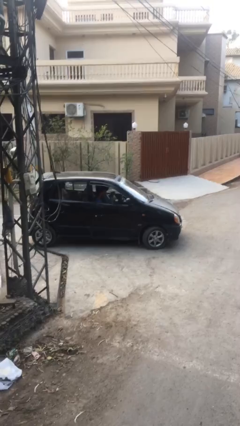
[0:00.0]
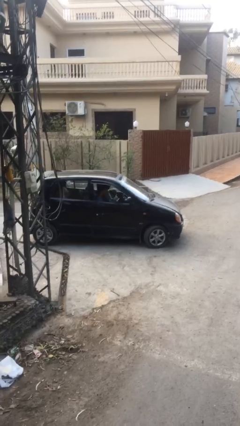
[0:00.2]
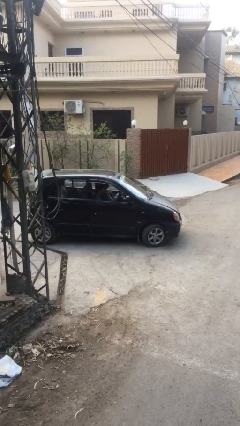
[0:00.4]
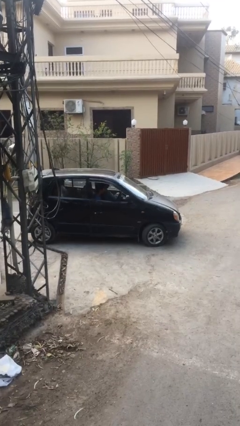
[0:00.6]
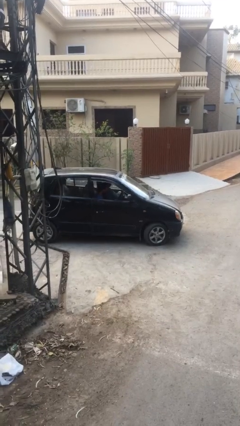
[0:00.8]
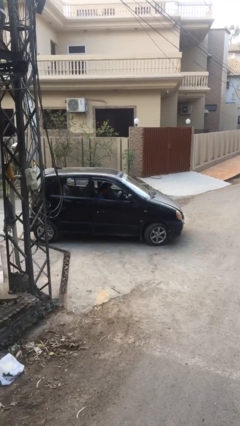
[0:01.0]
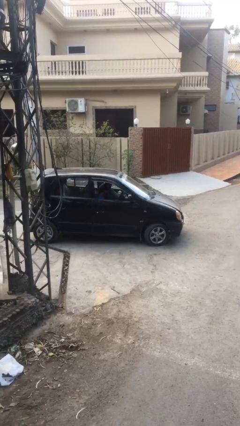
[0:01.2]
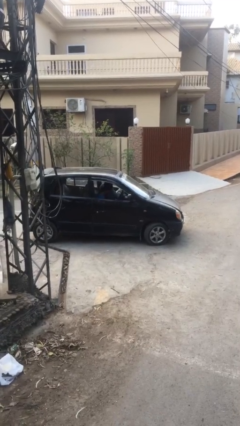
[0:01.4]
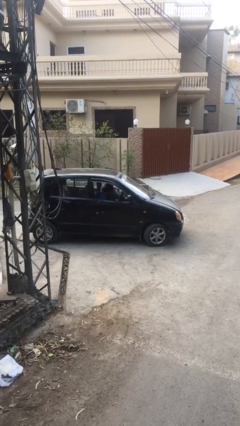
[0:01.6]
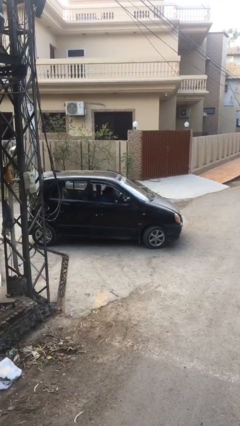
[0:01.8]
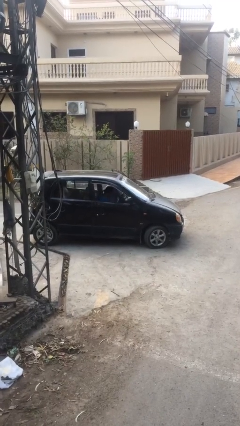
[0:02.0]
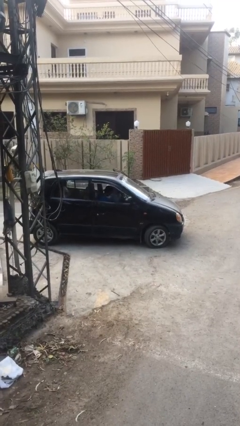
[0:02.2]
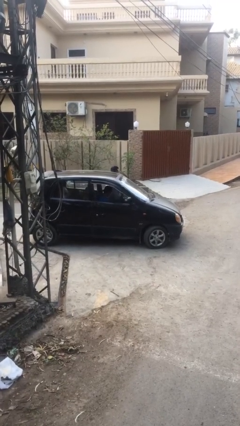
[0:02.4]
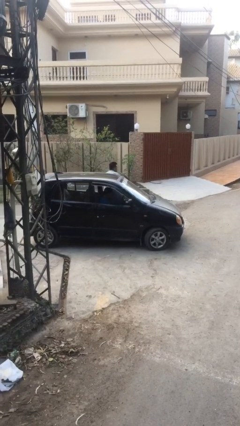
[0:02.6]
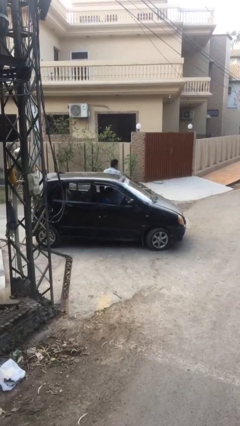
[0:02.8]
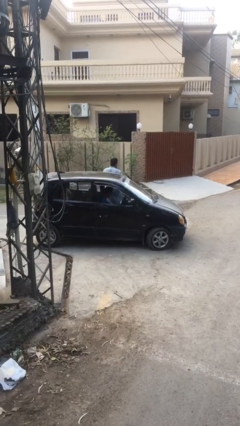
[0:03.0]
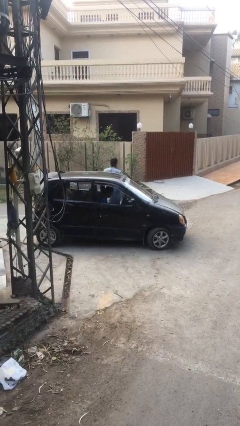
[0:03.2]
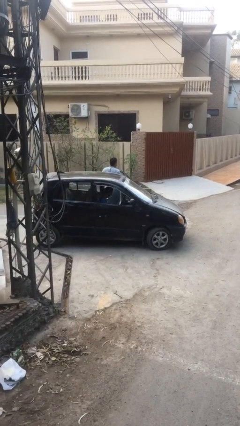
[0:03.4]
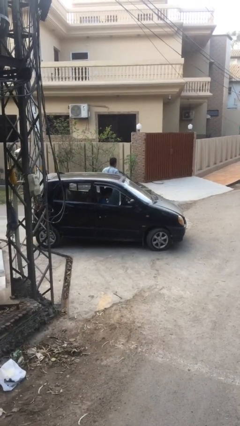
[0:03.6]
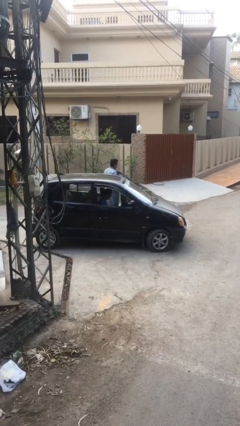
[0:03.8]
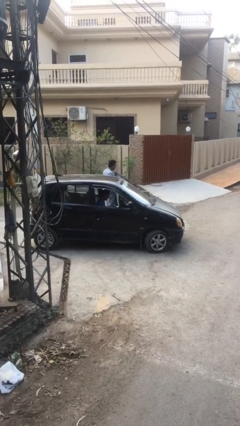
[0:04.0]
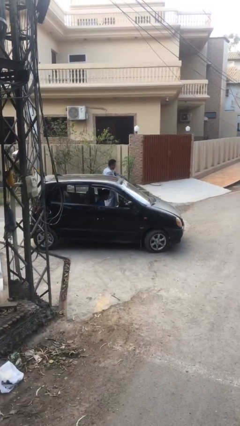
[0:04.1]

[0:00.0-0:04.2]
car drops off person

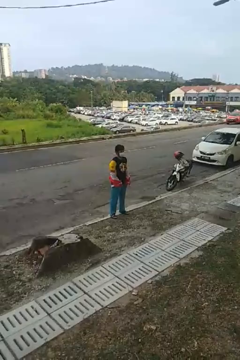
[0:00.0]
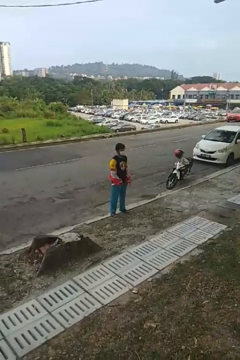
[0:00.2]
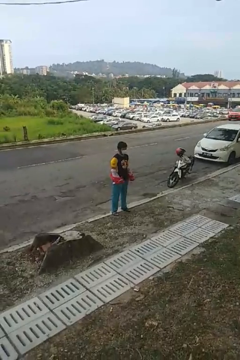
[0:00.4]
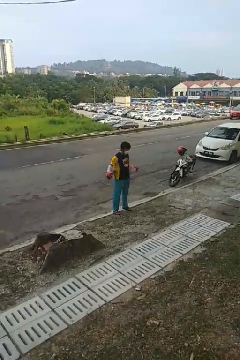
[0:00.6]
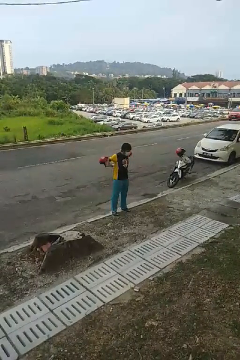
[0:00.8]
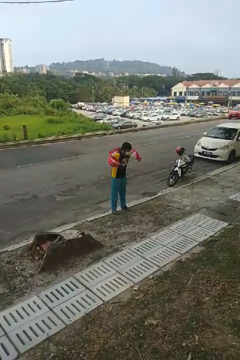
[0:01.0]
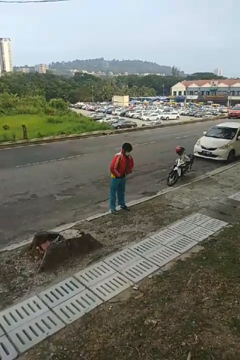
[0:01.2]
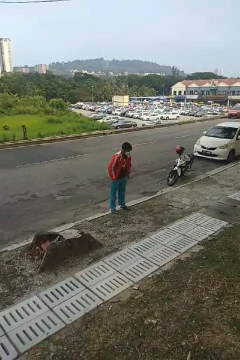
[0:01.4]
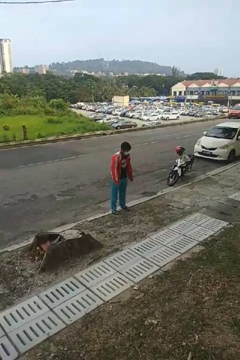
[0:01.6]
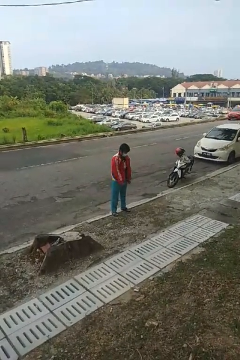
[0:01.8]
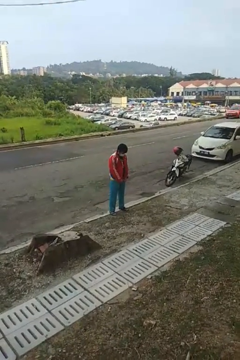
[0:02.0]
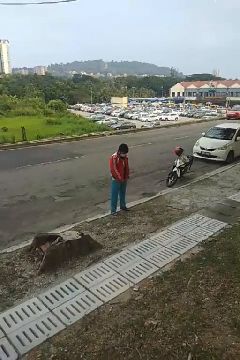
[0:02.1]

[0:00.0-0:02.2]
person puts on jacket

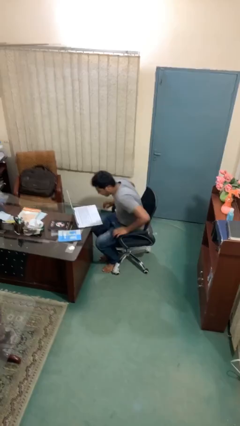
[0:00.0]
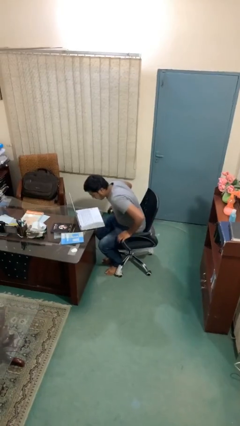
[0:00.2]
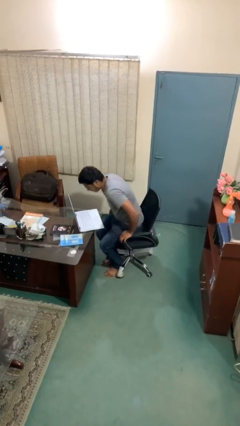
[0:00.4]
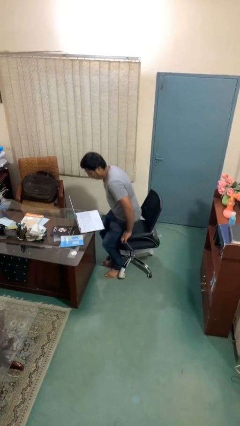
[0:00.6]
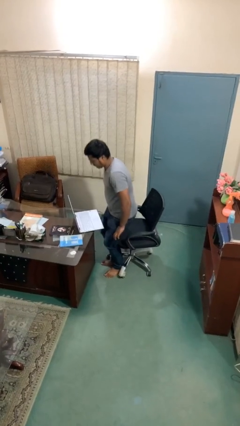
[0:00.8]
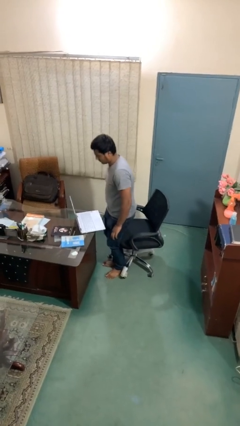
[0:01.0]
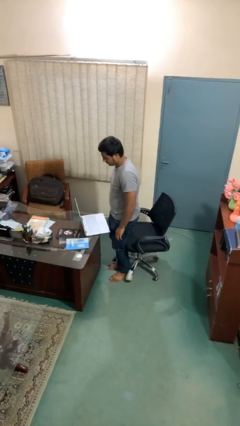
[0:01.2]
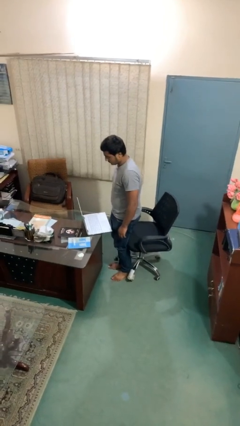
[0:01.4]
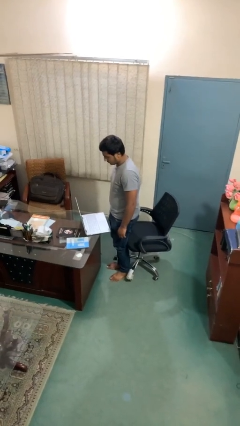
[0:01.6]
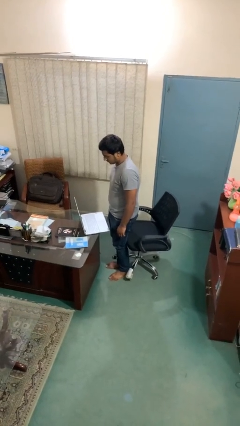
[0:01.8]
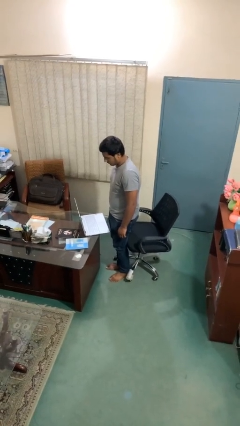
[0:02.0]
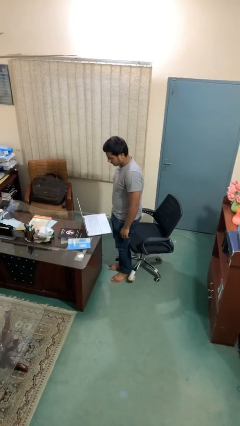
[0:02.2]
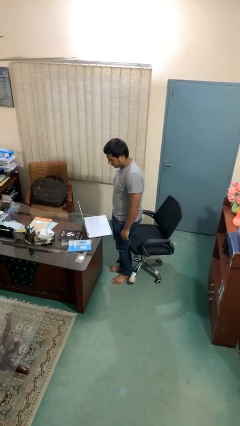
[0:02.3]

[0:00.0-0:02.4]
person stands up

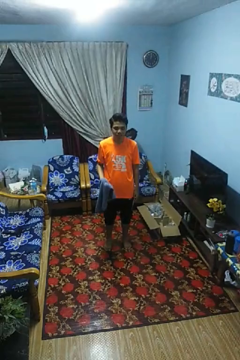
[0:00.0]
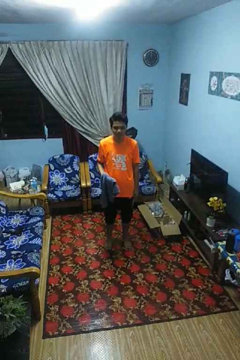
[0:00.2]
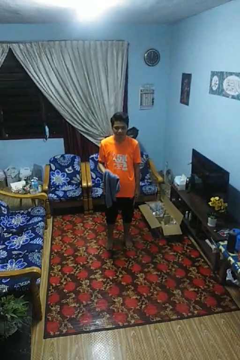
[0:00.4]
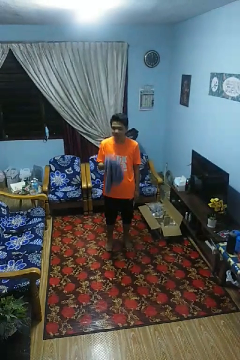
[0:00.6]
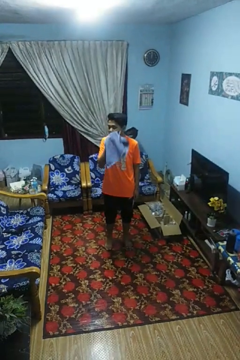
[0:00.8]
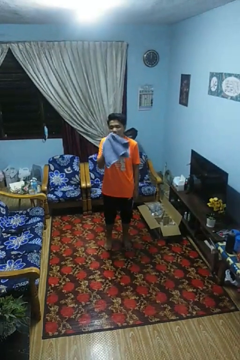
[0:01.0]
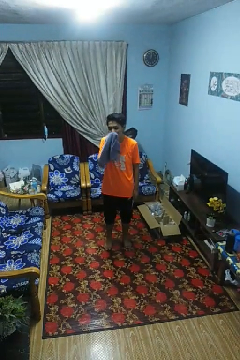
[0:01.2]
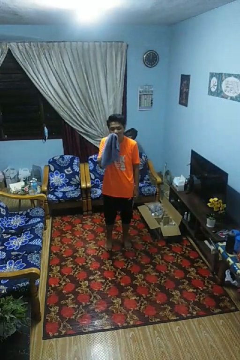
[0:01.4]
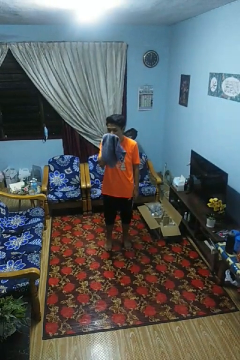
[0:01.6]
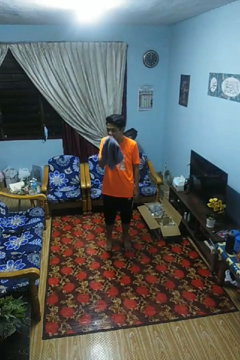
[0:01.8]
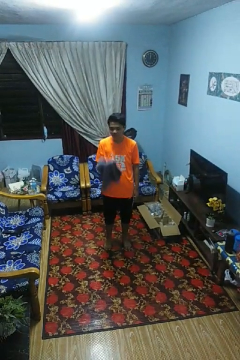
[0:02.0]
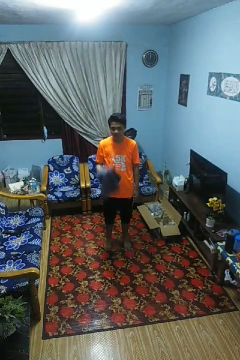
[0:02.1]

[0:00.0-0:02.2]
person wipes mouth with napkin

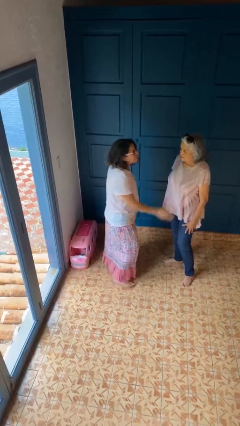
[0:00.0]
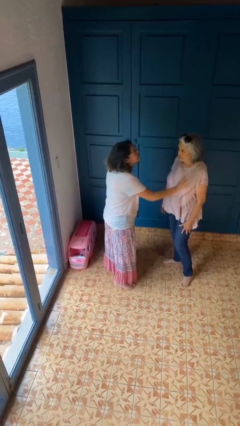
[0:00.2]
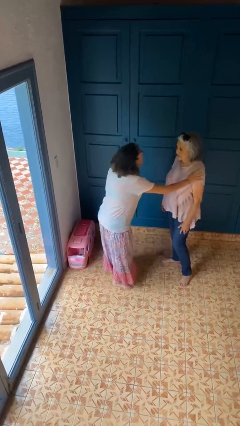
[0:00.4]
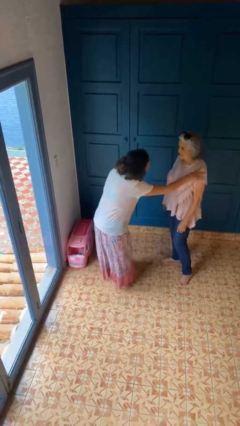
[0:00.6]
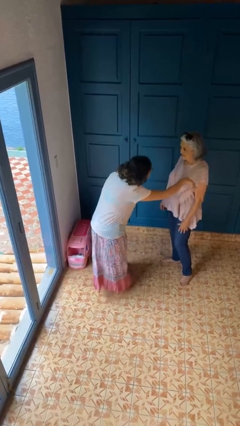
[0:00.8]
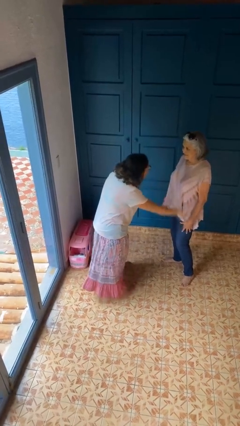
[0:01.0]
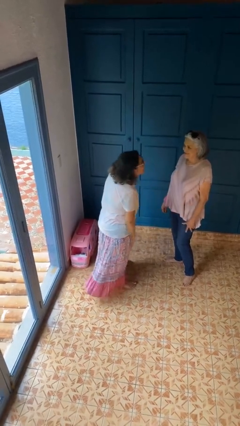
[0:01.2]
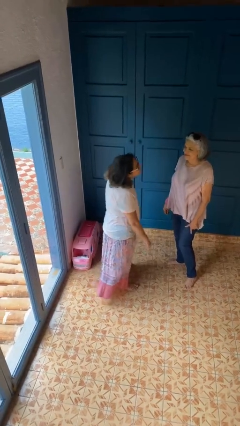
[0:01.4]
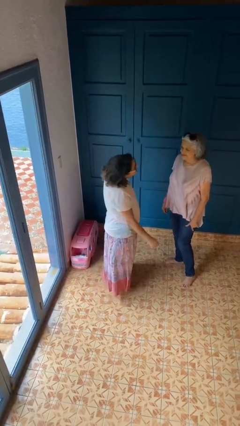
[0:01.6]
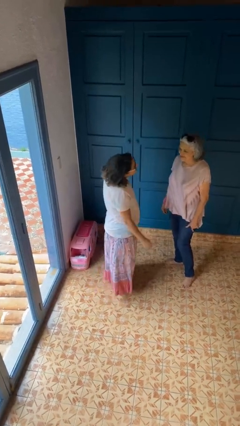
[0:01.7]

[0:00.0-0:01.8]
person shoves person

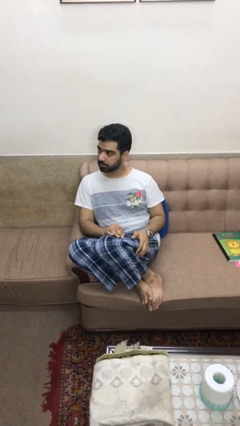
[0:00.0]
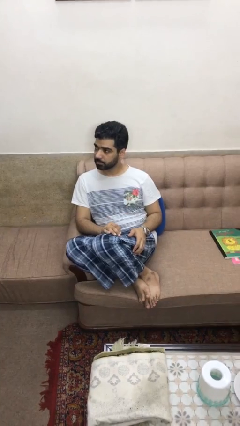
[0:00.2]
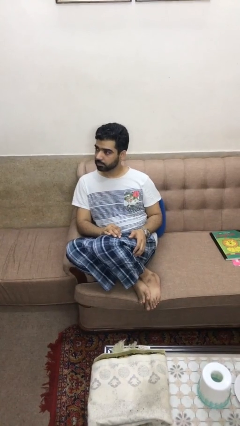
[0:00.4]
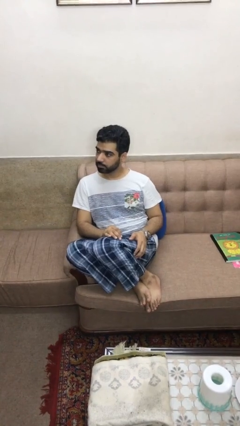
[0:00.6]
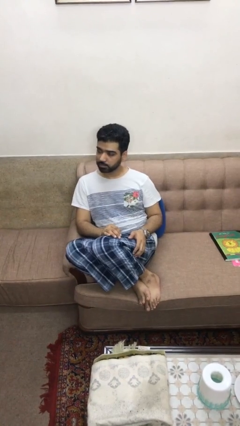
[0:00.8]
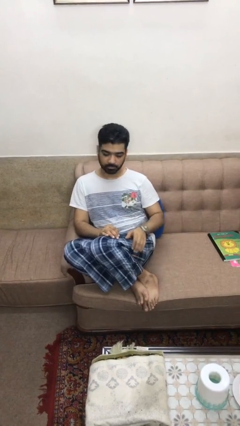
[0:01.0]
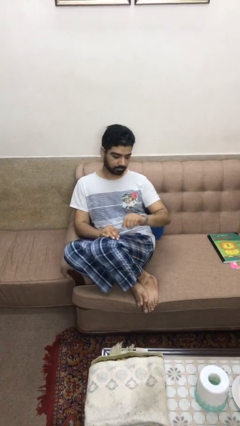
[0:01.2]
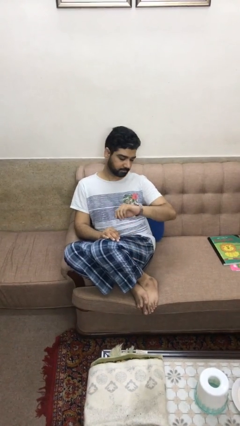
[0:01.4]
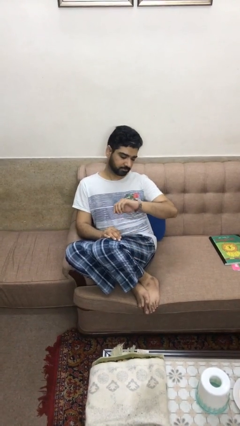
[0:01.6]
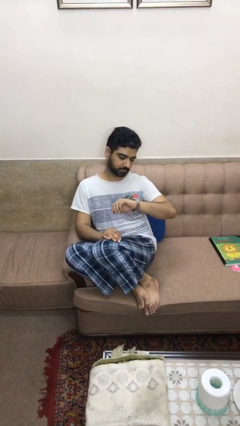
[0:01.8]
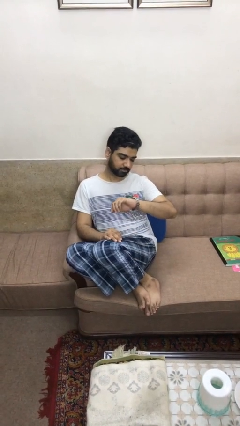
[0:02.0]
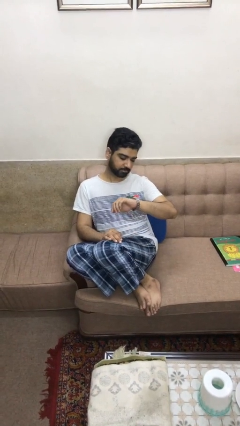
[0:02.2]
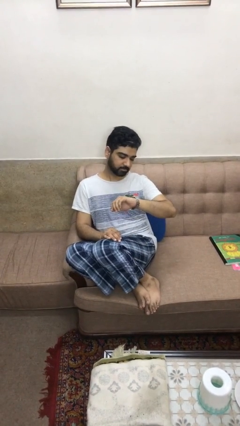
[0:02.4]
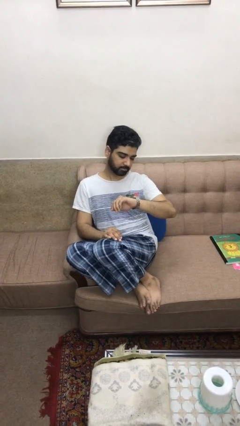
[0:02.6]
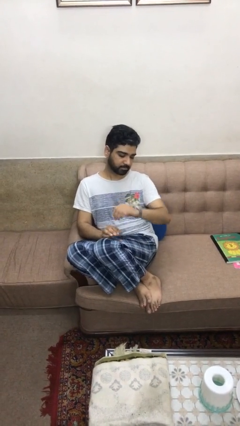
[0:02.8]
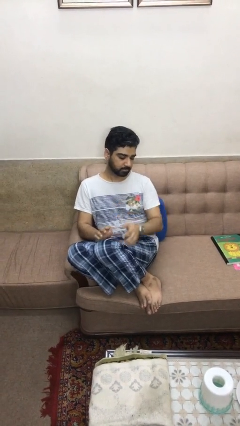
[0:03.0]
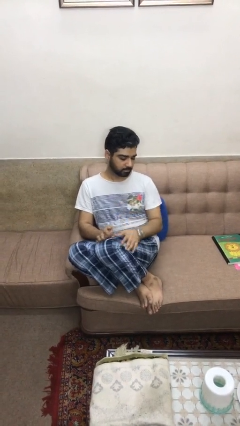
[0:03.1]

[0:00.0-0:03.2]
person looks at wristwatch

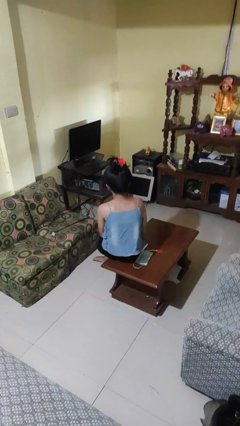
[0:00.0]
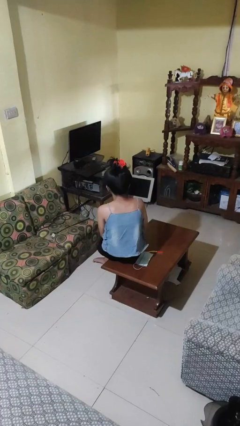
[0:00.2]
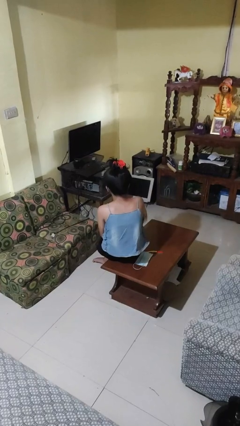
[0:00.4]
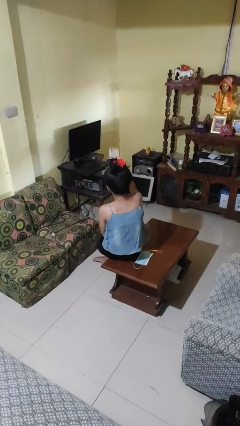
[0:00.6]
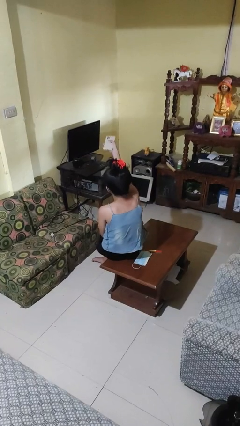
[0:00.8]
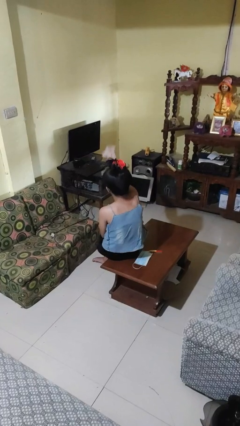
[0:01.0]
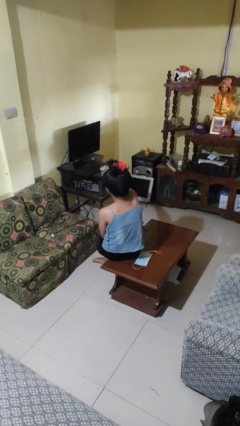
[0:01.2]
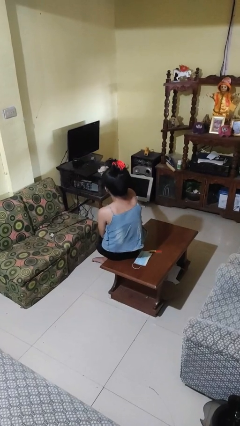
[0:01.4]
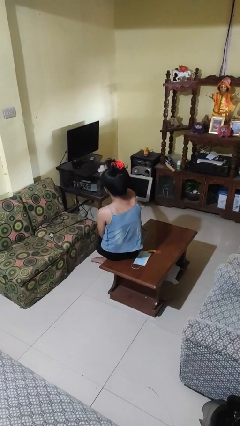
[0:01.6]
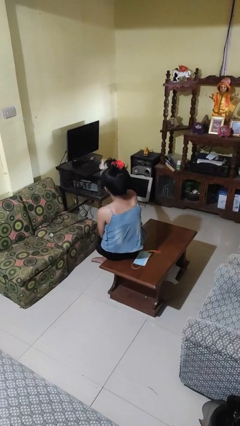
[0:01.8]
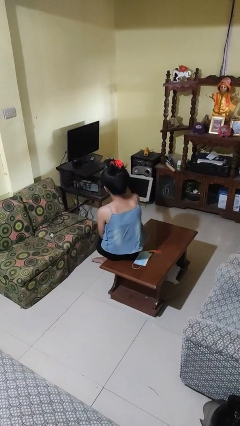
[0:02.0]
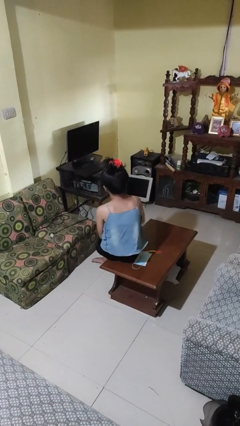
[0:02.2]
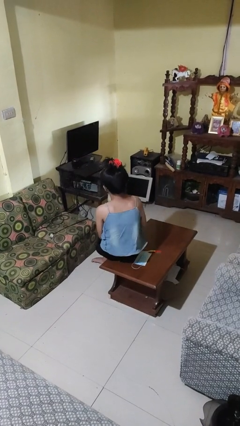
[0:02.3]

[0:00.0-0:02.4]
person uses television remote

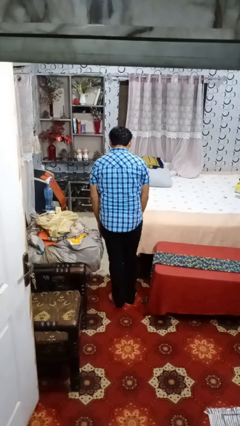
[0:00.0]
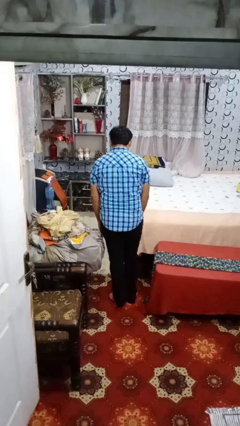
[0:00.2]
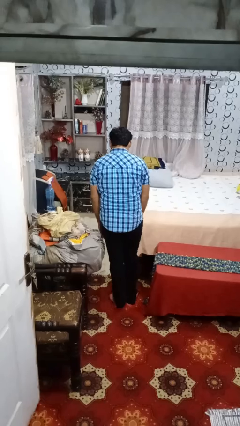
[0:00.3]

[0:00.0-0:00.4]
person stubs toe
